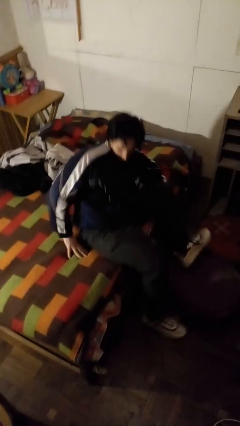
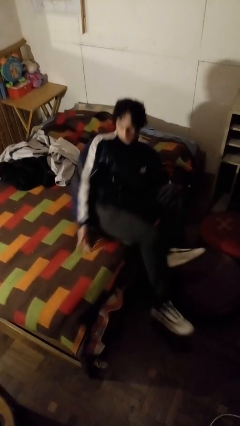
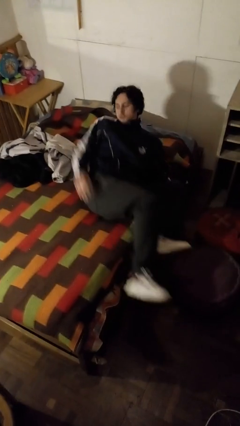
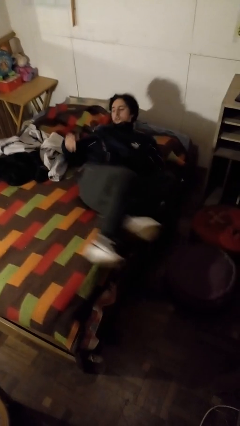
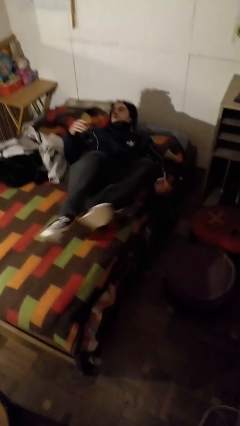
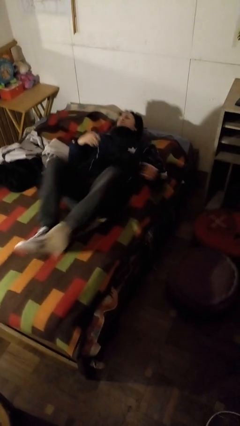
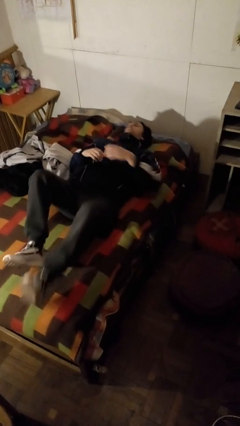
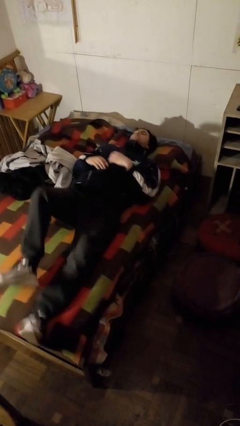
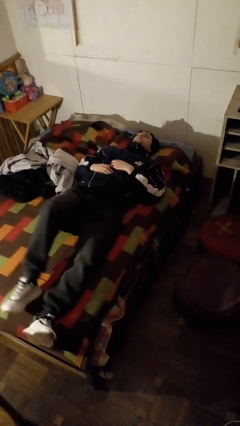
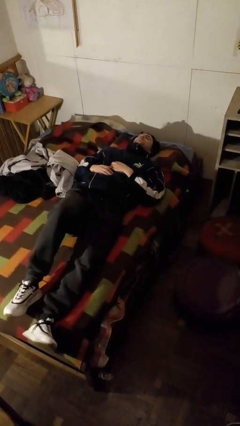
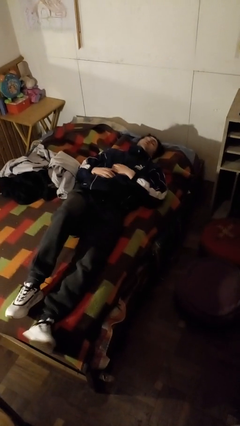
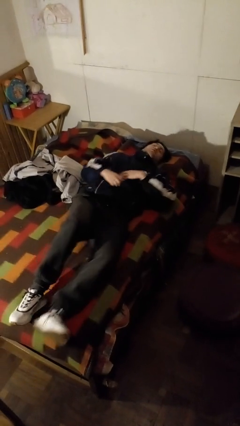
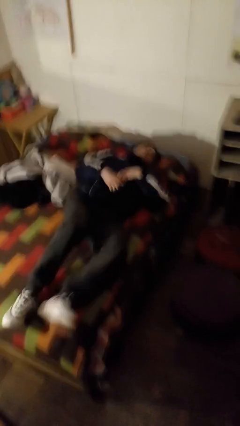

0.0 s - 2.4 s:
person lies down on bed

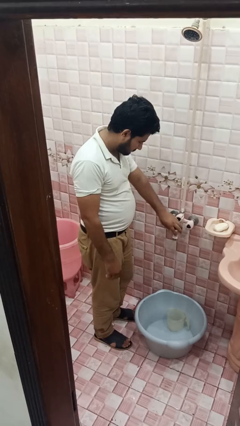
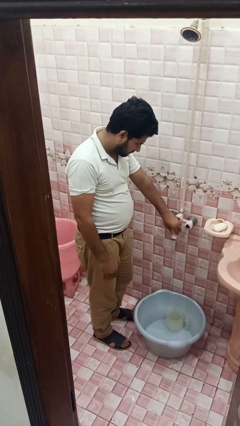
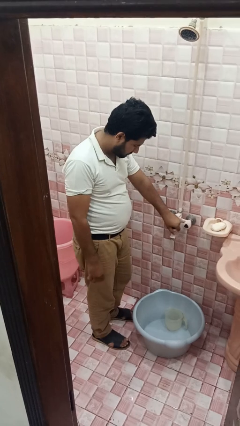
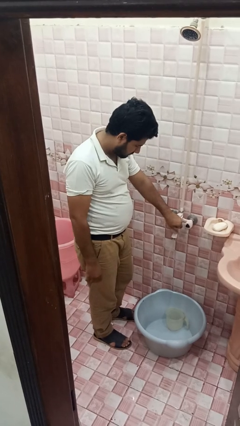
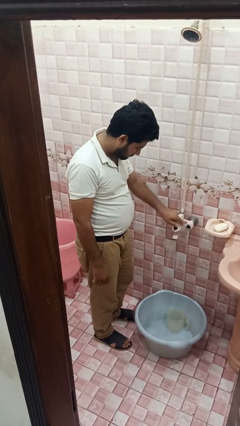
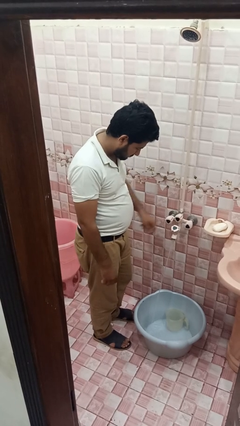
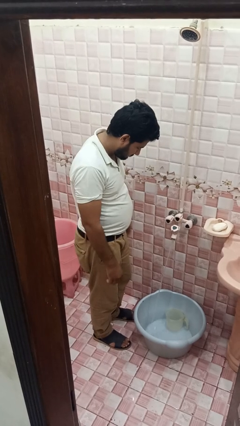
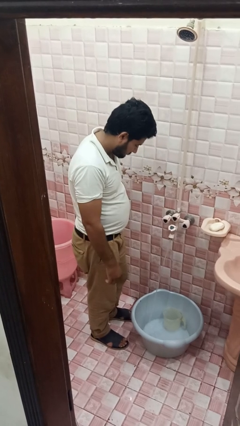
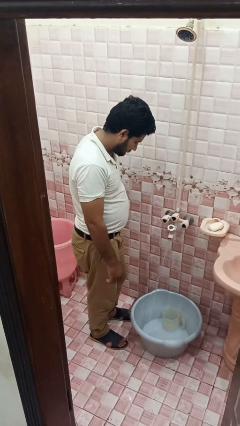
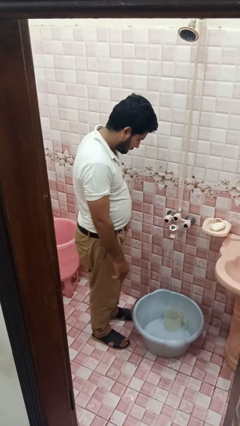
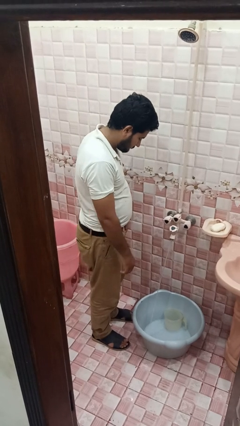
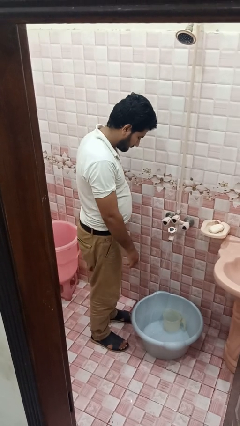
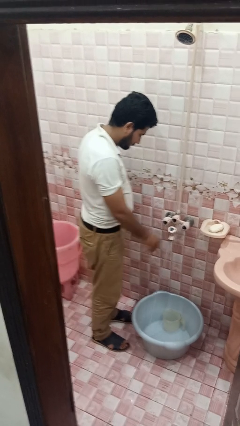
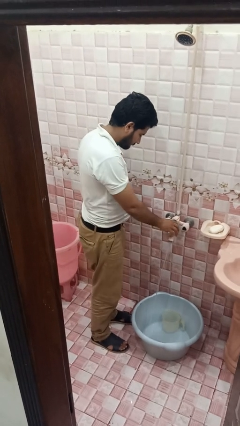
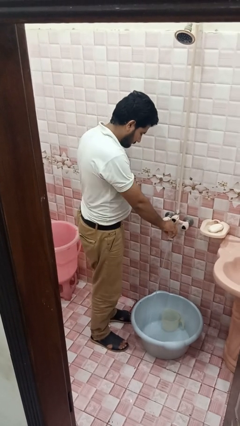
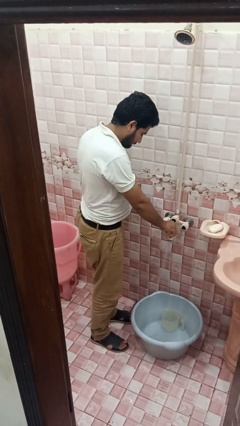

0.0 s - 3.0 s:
person turns on faucet

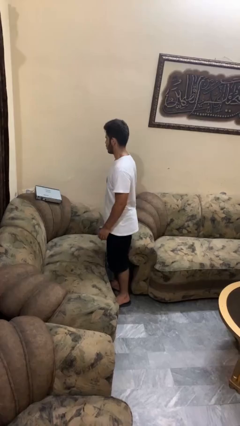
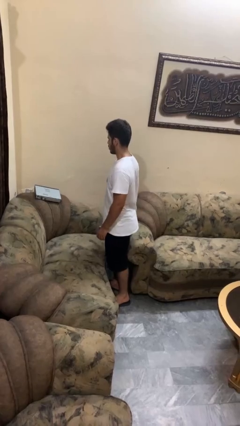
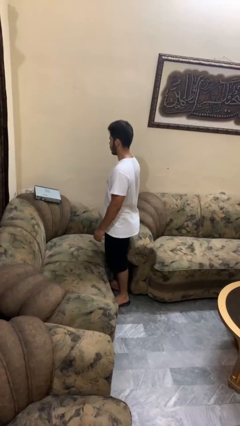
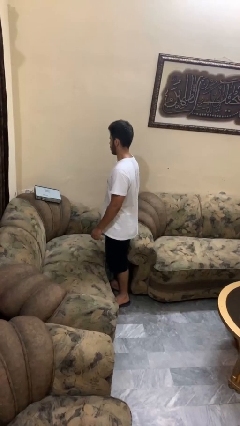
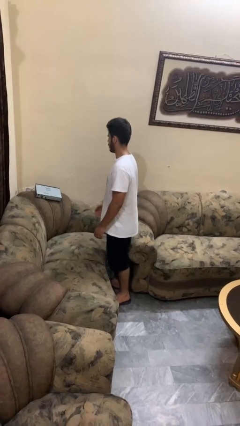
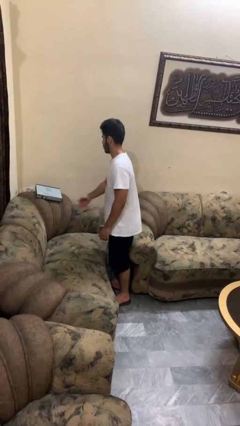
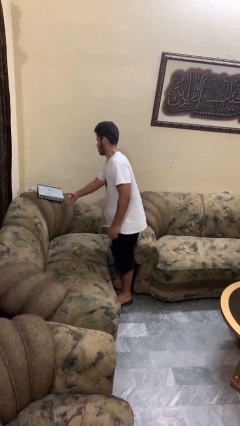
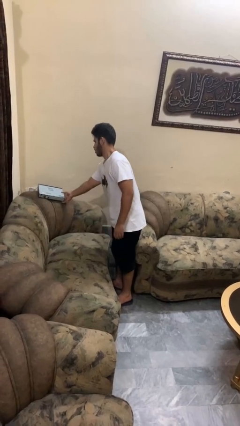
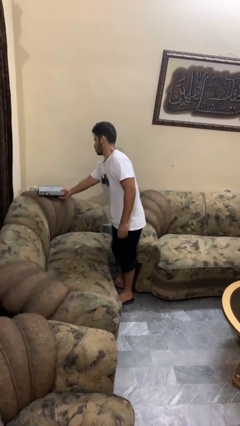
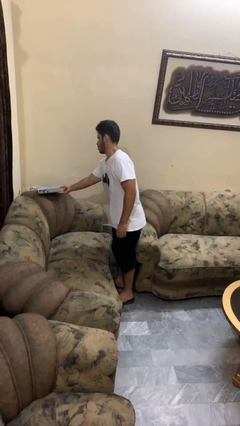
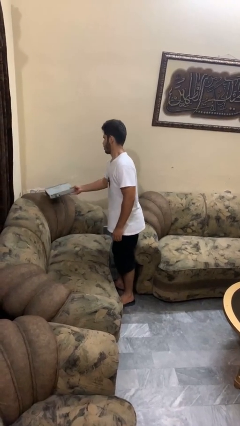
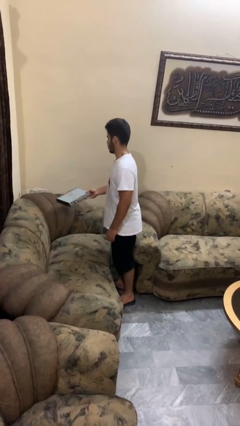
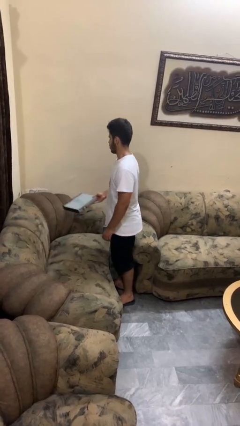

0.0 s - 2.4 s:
person picks up object from couch

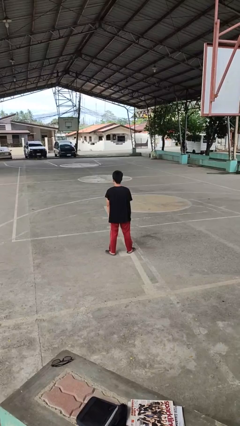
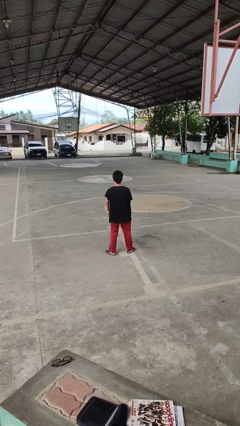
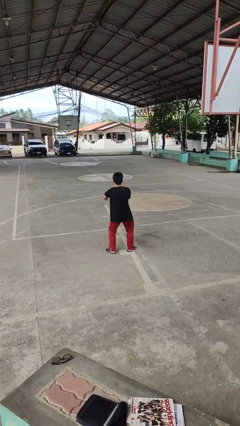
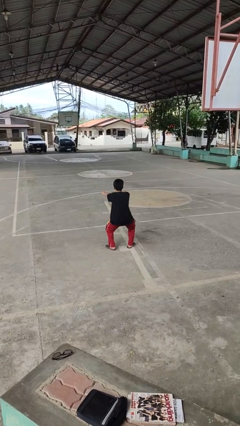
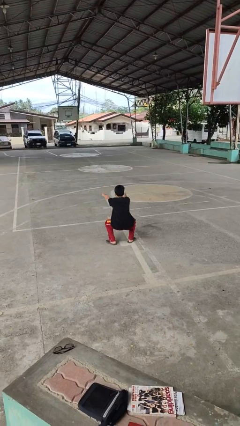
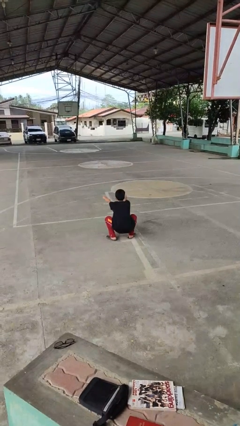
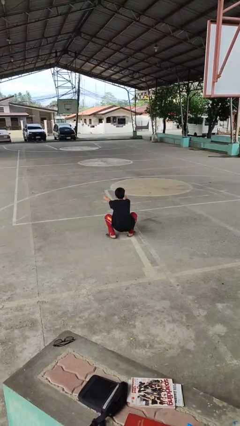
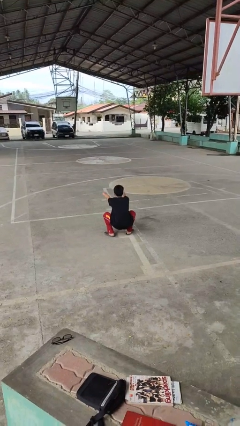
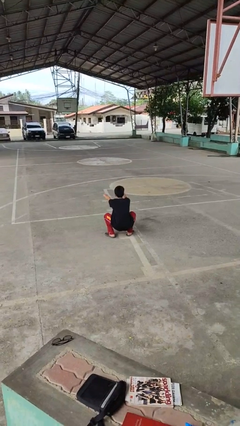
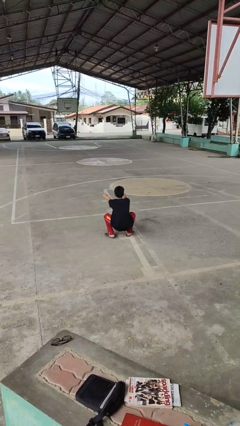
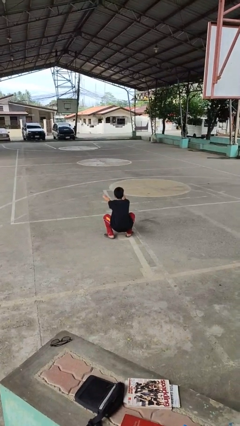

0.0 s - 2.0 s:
person squats

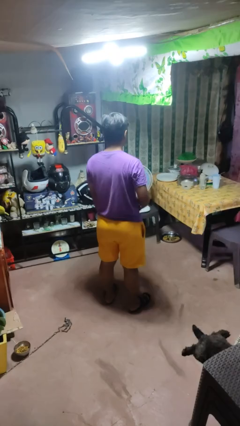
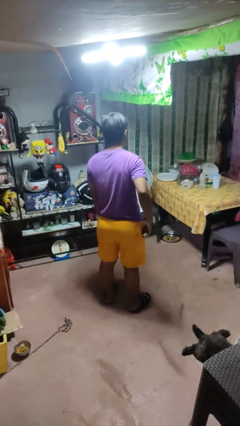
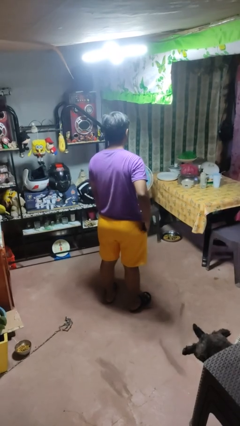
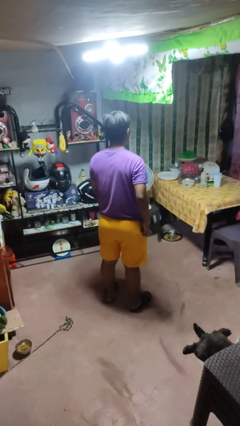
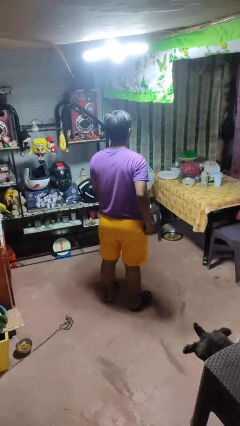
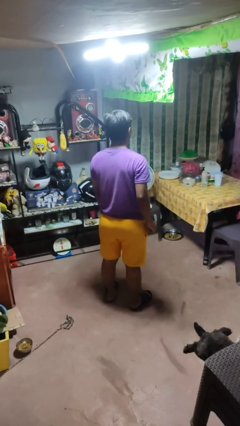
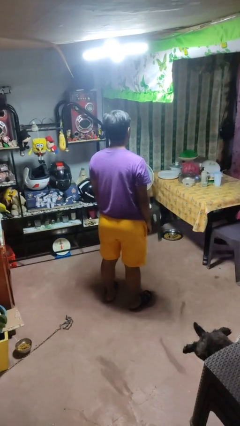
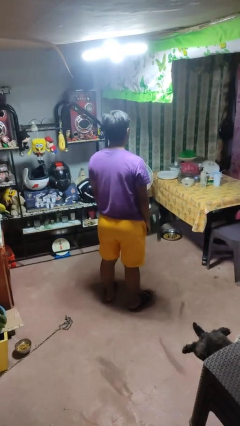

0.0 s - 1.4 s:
person puts phone into pocket

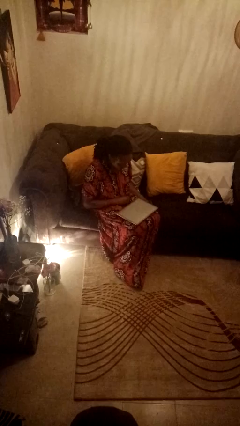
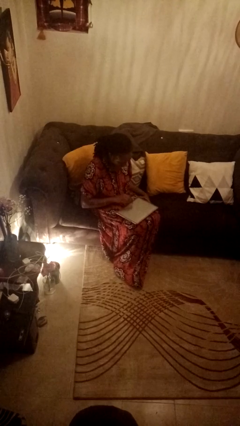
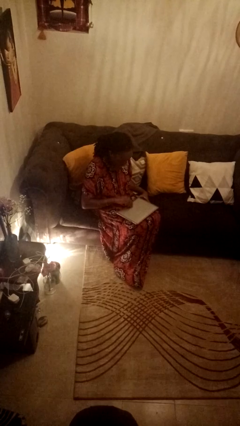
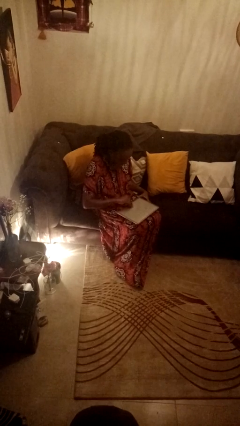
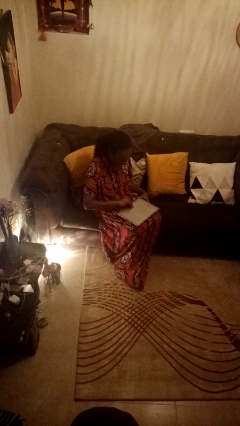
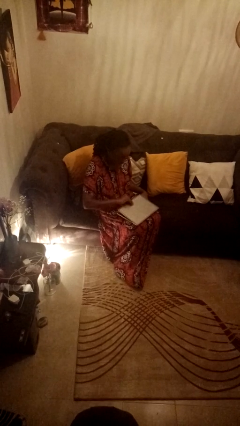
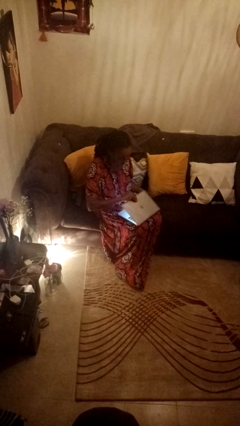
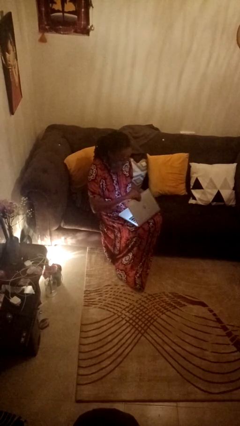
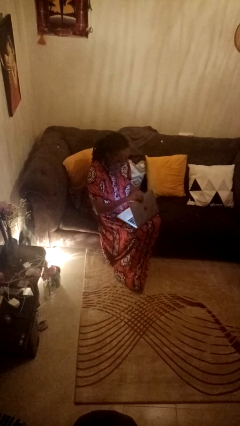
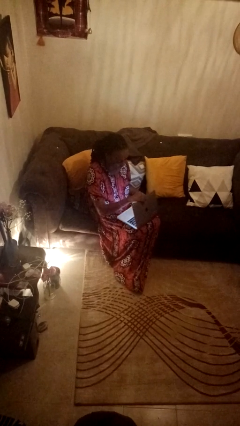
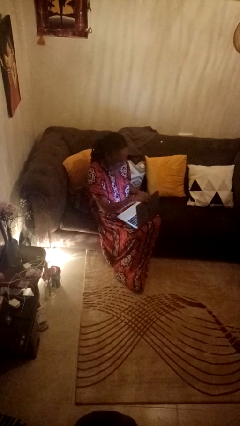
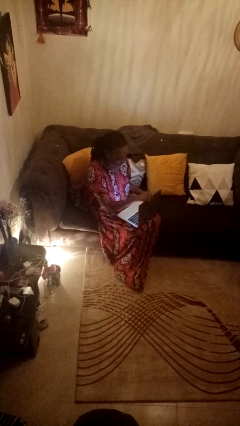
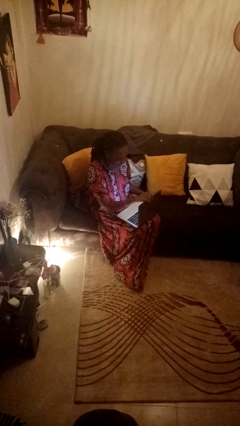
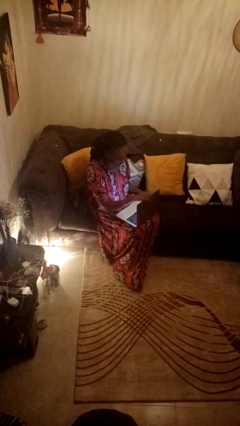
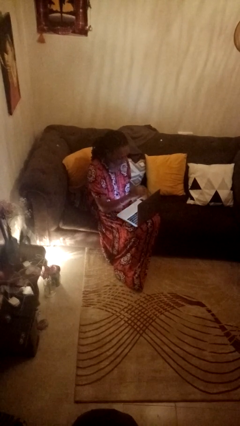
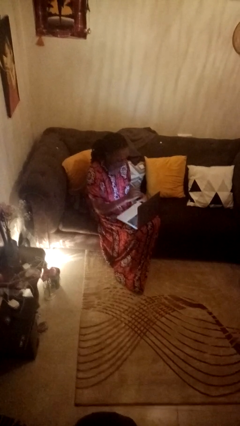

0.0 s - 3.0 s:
person opens laptop

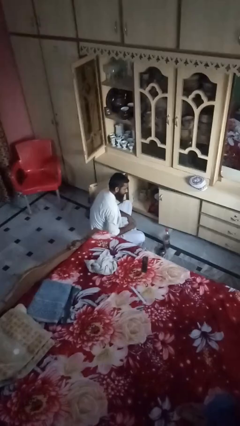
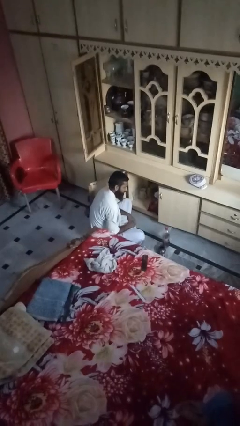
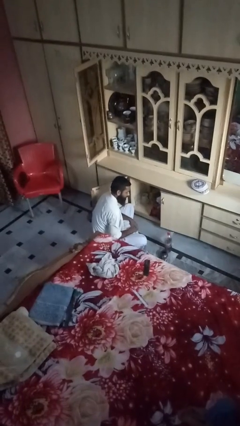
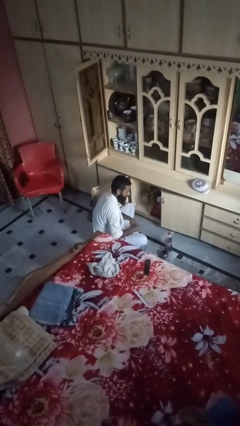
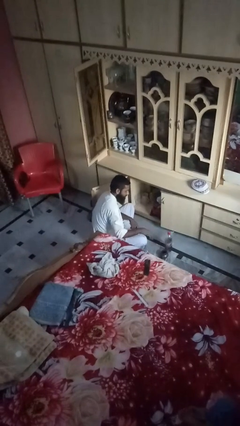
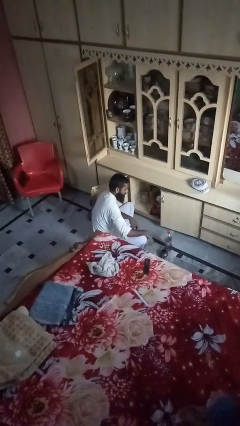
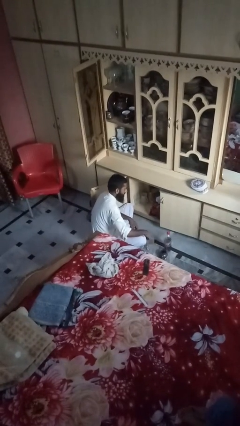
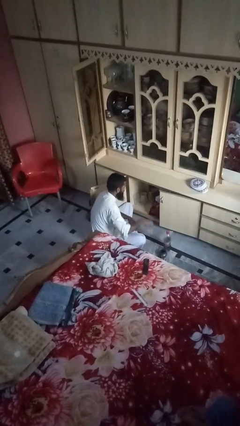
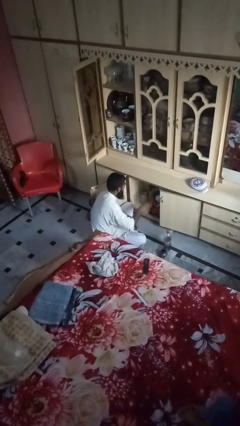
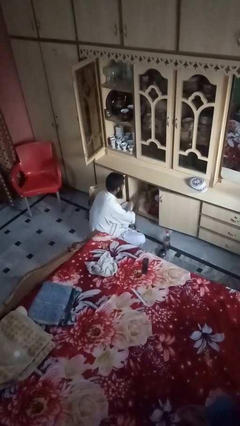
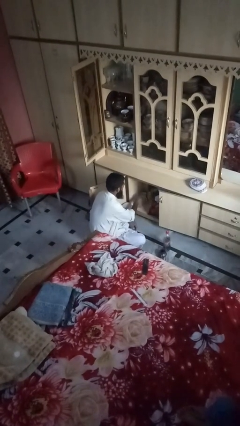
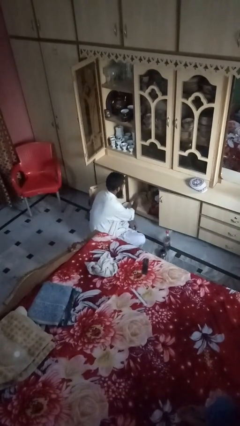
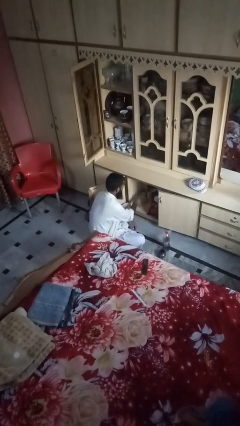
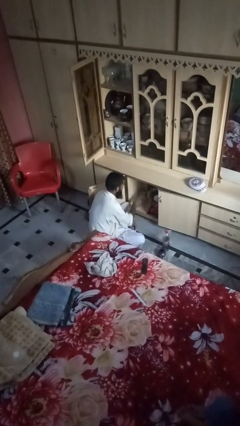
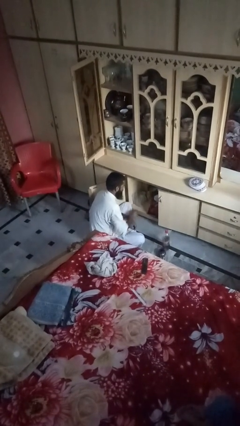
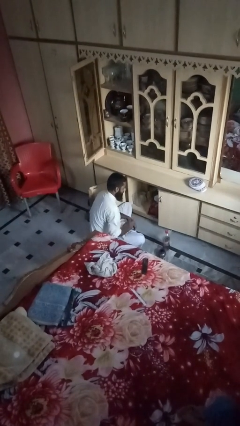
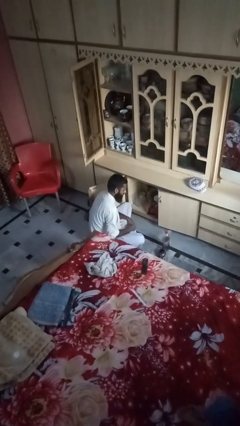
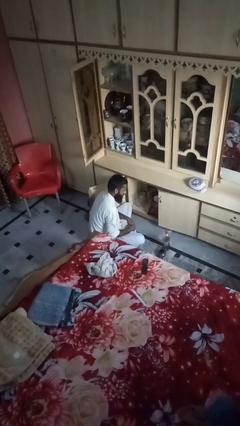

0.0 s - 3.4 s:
person loads groceries into cabinet
